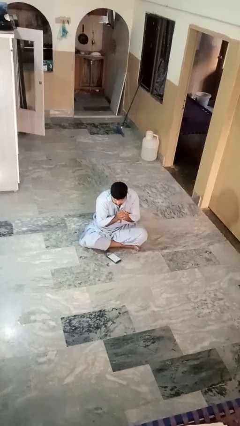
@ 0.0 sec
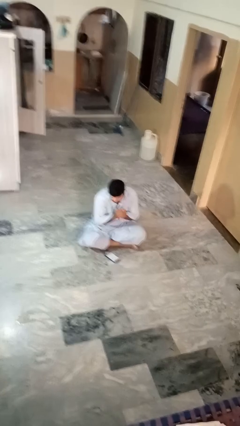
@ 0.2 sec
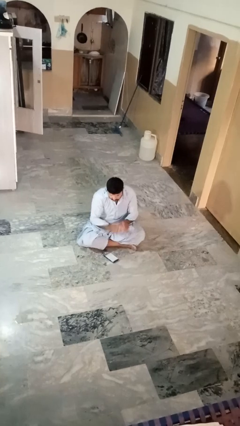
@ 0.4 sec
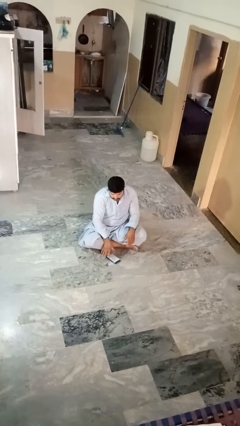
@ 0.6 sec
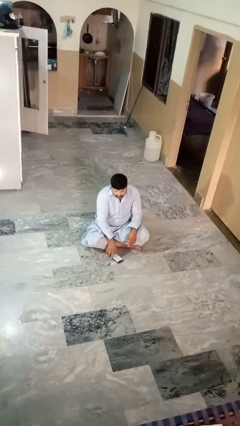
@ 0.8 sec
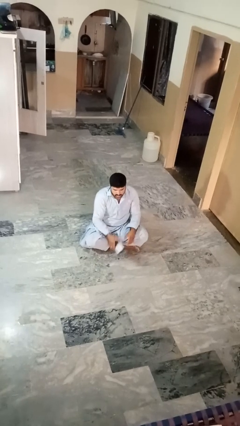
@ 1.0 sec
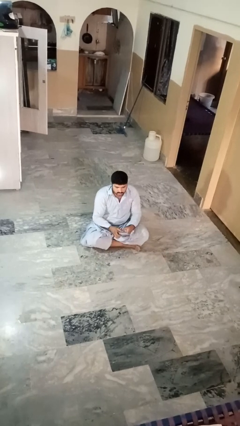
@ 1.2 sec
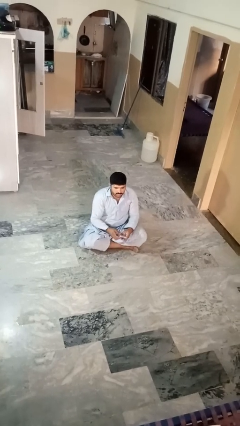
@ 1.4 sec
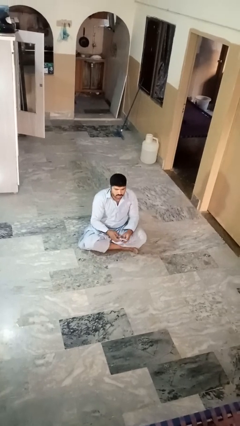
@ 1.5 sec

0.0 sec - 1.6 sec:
person picks up object from floor

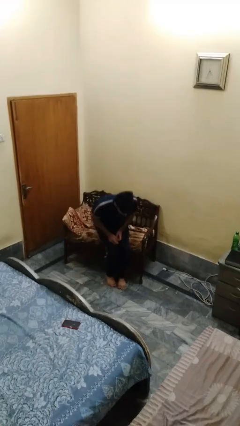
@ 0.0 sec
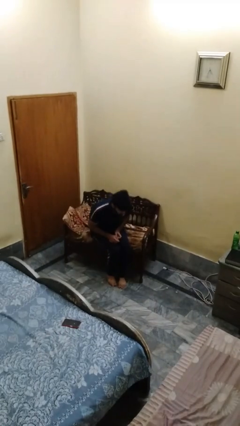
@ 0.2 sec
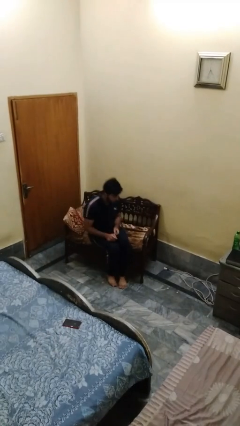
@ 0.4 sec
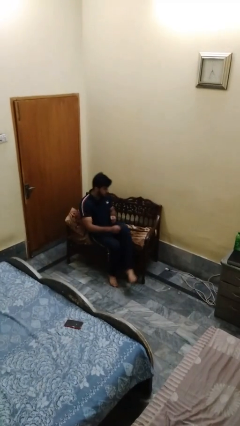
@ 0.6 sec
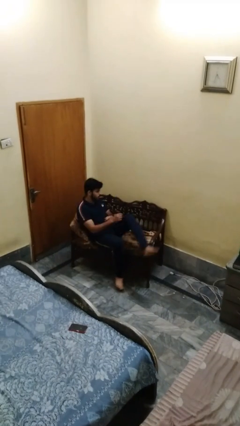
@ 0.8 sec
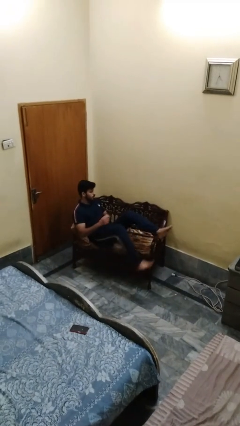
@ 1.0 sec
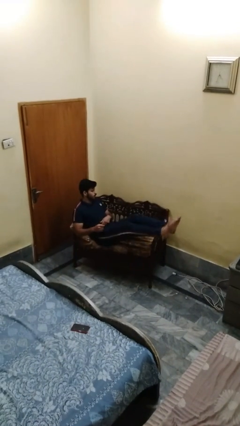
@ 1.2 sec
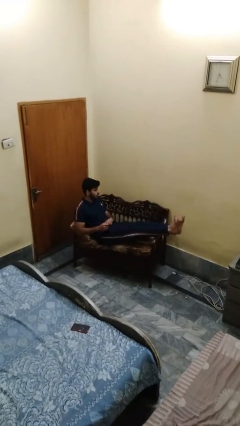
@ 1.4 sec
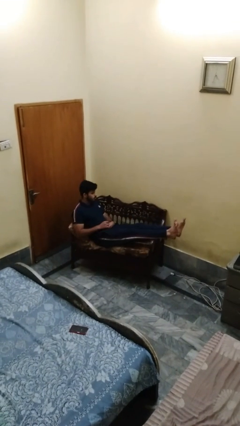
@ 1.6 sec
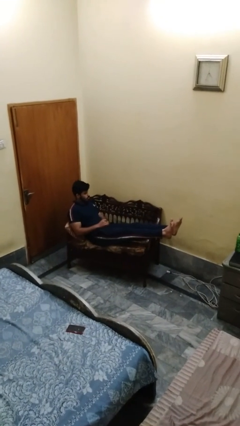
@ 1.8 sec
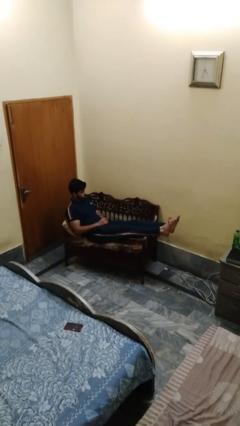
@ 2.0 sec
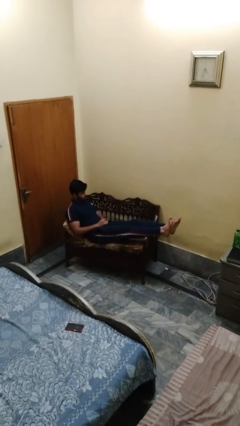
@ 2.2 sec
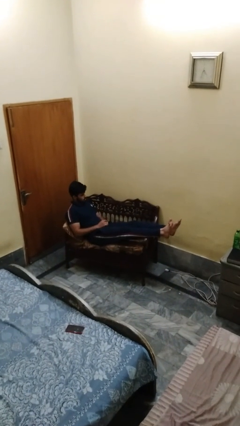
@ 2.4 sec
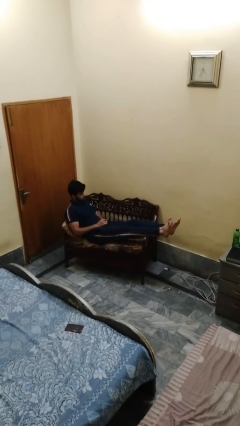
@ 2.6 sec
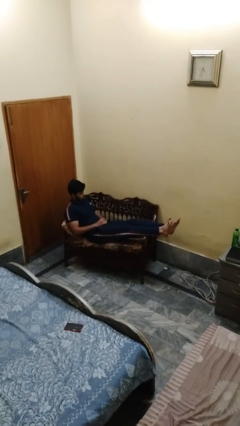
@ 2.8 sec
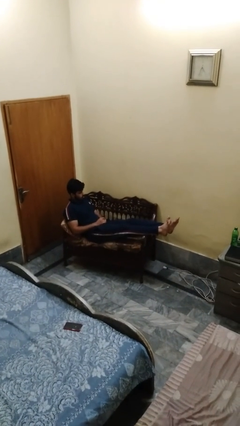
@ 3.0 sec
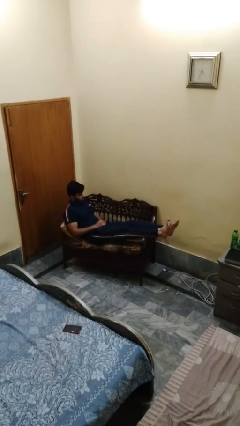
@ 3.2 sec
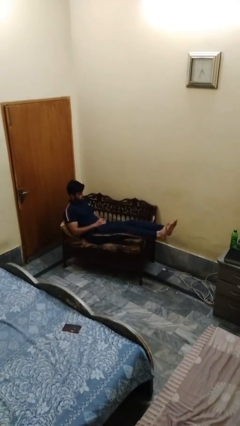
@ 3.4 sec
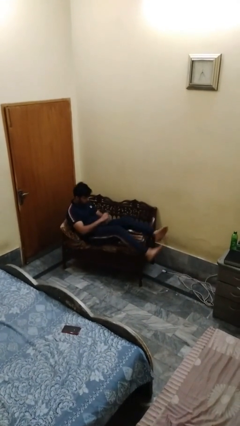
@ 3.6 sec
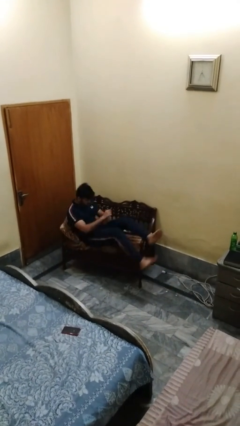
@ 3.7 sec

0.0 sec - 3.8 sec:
person lies down on couch

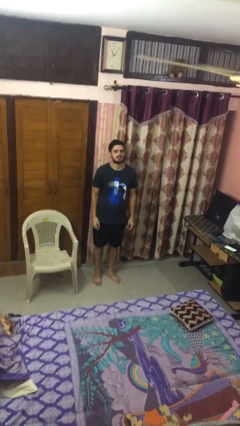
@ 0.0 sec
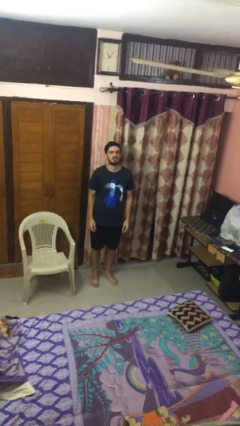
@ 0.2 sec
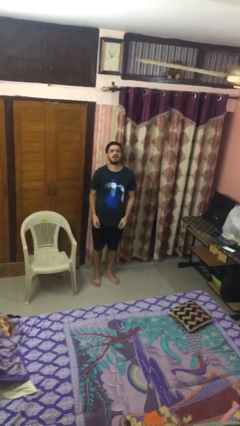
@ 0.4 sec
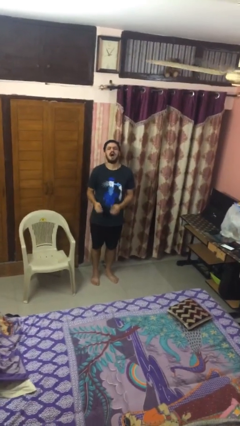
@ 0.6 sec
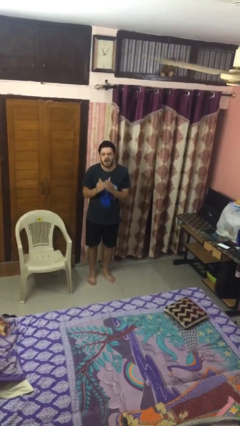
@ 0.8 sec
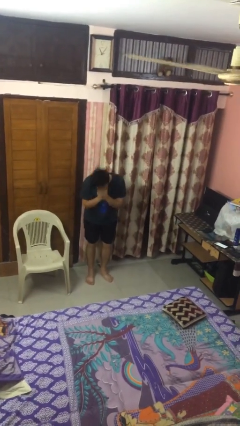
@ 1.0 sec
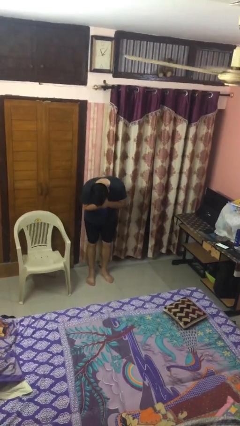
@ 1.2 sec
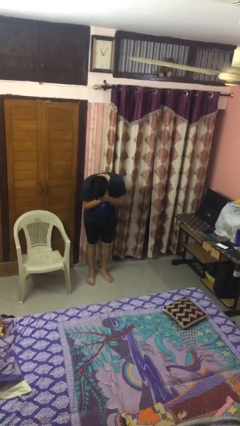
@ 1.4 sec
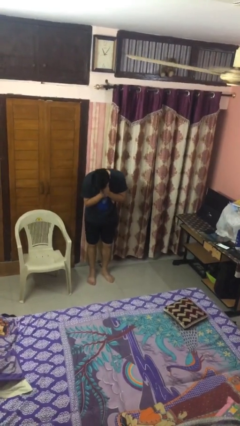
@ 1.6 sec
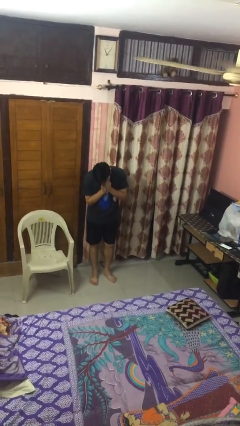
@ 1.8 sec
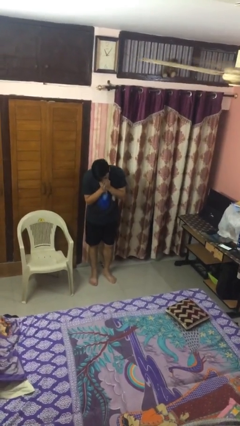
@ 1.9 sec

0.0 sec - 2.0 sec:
person sneezes into hand

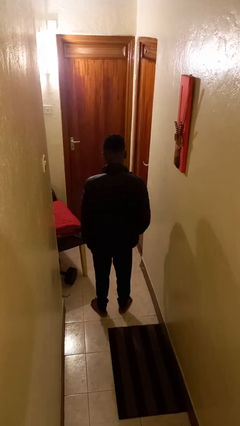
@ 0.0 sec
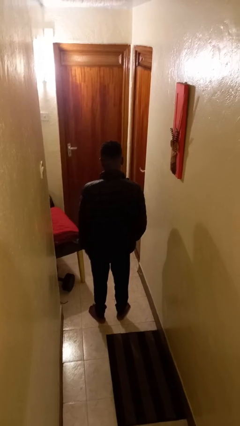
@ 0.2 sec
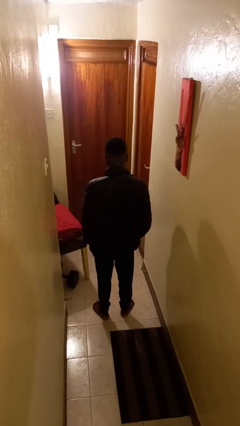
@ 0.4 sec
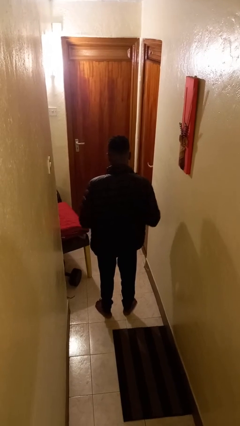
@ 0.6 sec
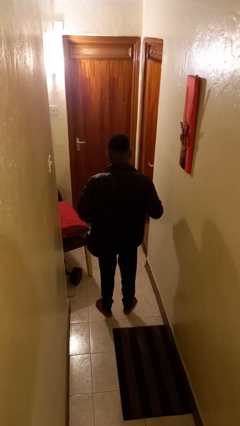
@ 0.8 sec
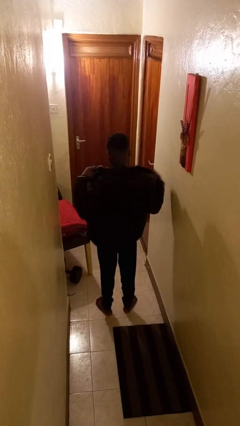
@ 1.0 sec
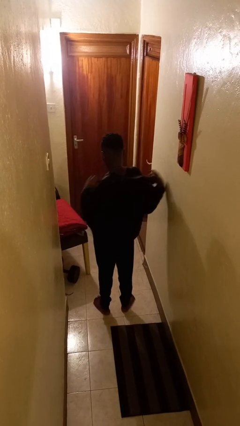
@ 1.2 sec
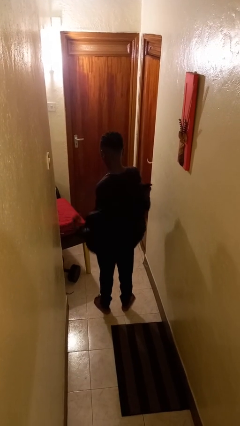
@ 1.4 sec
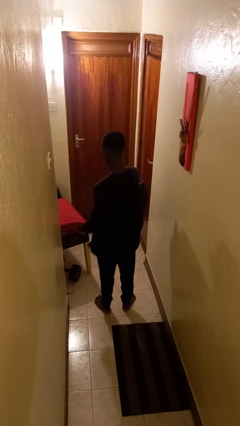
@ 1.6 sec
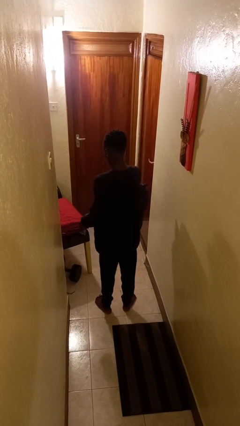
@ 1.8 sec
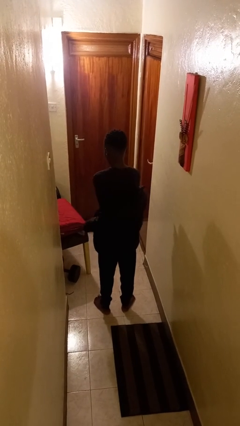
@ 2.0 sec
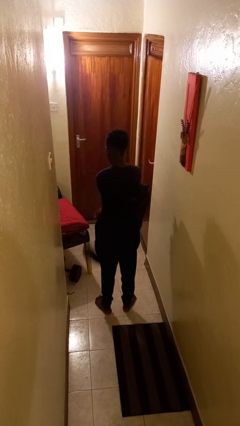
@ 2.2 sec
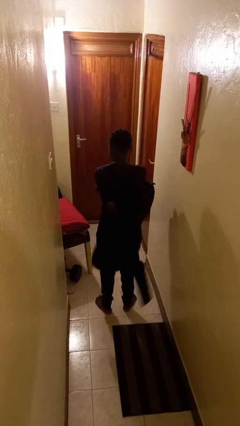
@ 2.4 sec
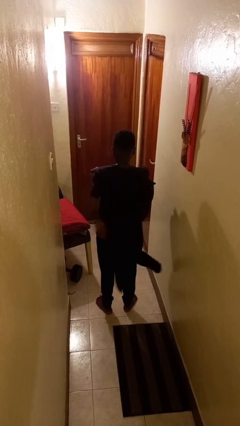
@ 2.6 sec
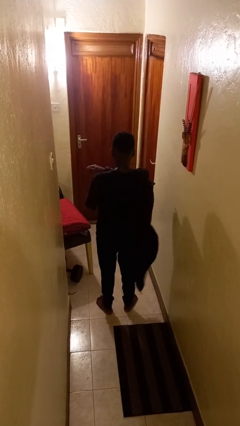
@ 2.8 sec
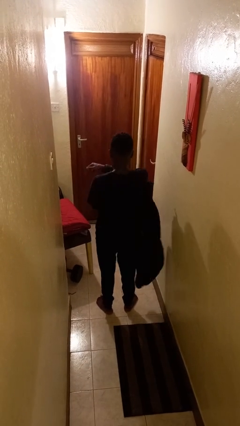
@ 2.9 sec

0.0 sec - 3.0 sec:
person takes off jacket

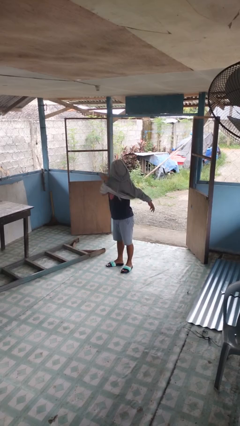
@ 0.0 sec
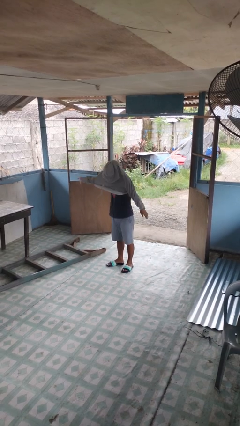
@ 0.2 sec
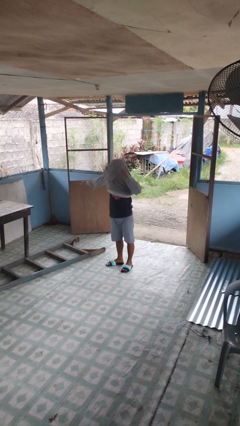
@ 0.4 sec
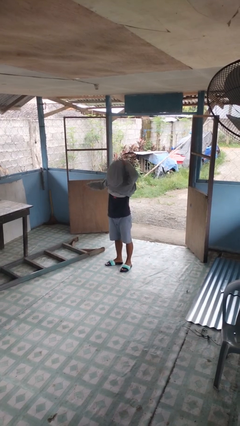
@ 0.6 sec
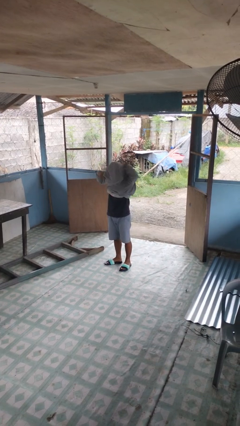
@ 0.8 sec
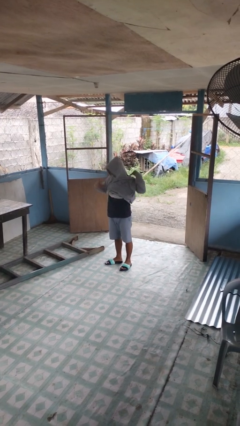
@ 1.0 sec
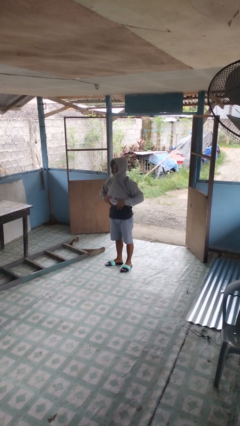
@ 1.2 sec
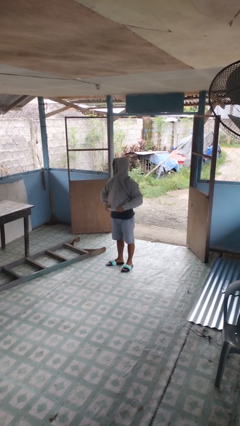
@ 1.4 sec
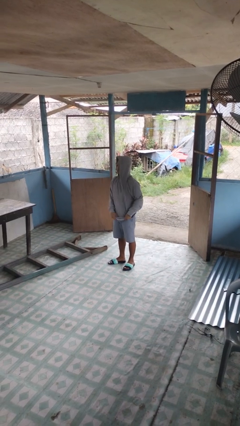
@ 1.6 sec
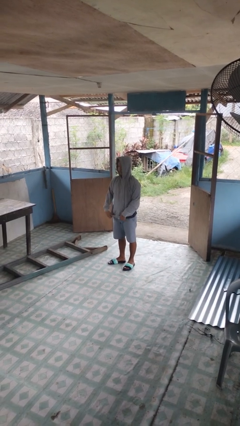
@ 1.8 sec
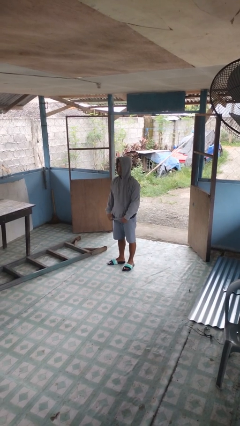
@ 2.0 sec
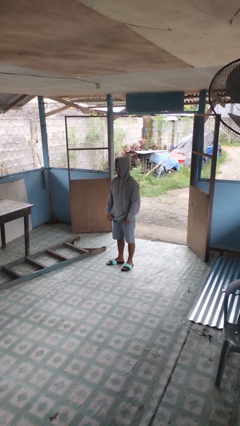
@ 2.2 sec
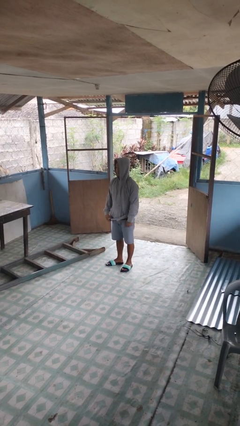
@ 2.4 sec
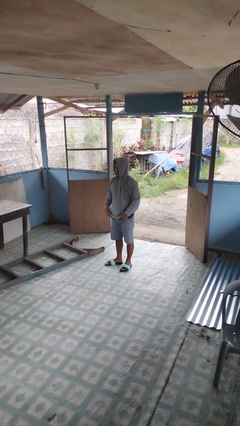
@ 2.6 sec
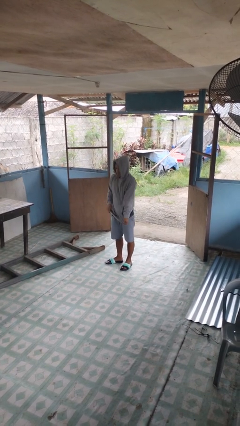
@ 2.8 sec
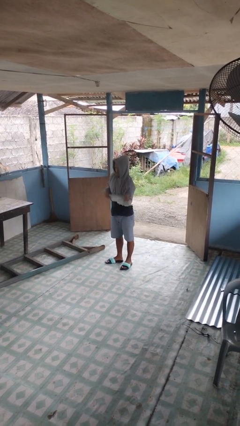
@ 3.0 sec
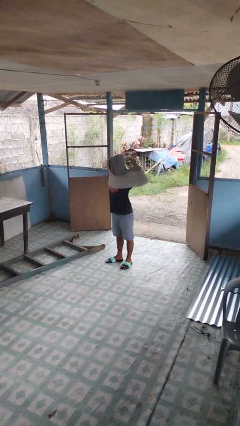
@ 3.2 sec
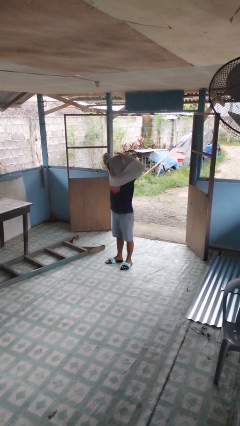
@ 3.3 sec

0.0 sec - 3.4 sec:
person puts on hoodie

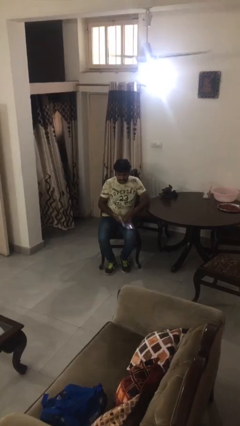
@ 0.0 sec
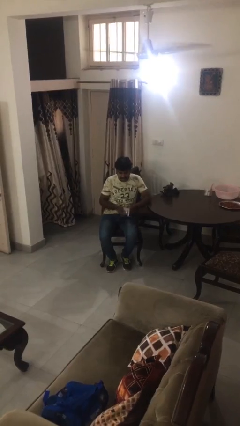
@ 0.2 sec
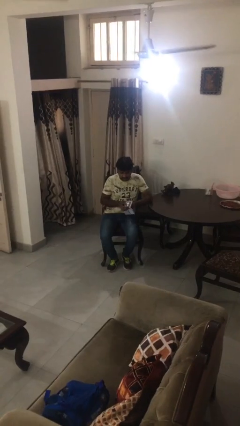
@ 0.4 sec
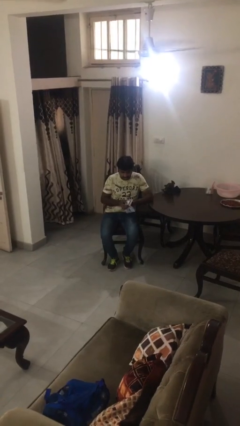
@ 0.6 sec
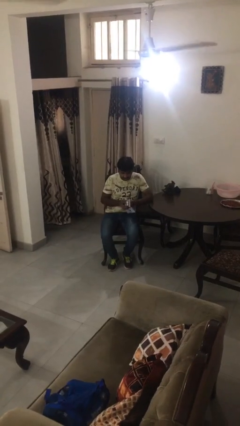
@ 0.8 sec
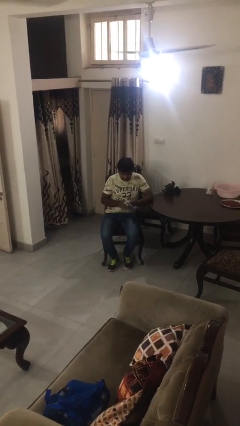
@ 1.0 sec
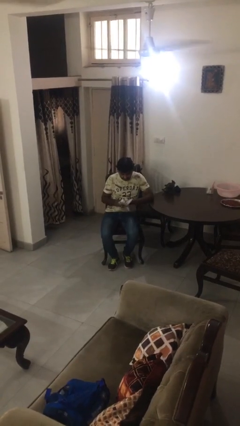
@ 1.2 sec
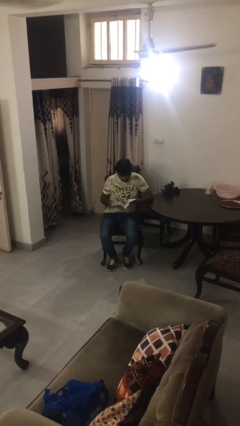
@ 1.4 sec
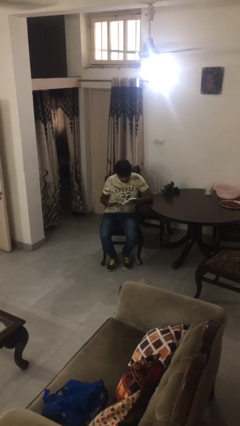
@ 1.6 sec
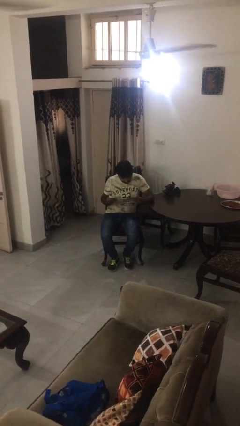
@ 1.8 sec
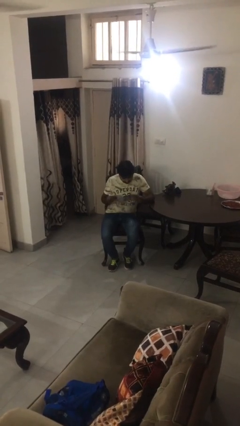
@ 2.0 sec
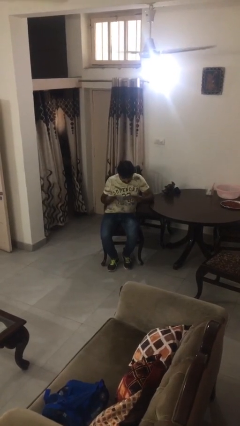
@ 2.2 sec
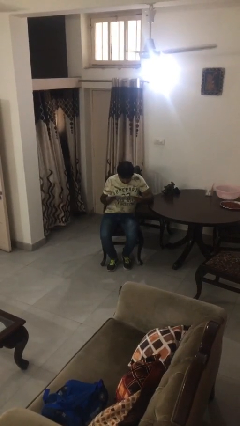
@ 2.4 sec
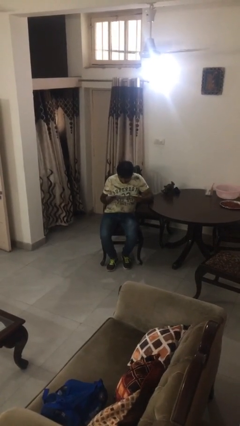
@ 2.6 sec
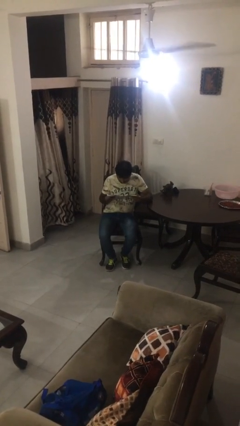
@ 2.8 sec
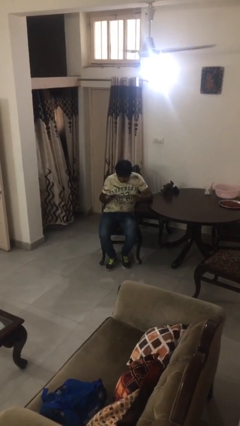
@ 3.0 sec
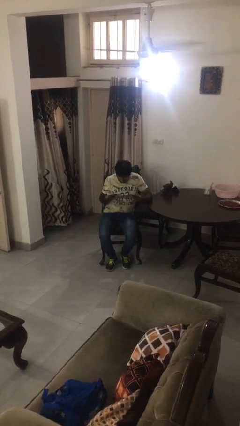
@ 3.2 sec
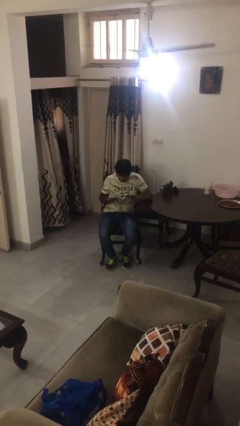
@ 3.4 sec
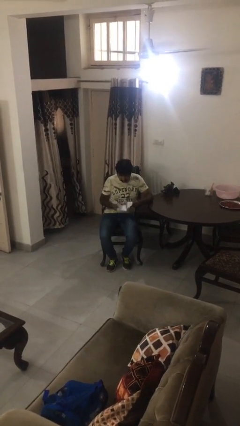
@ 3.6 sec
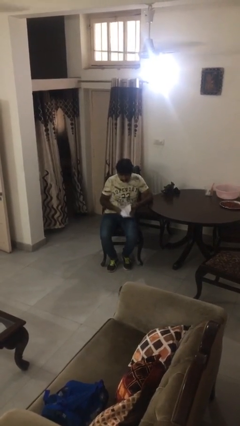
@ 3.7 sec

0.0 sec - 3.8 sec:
person reads magazine
